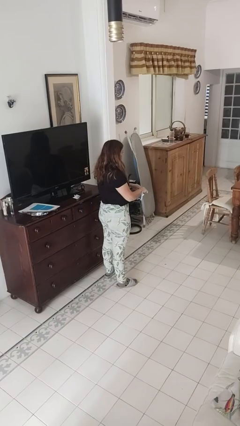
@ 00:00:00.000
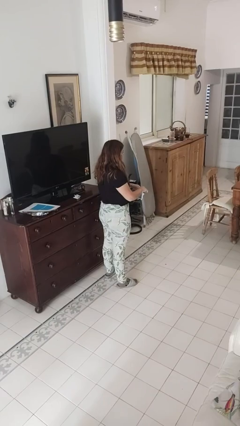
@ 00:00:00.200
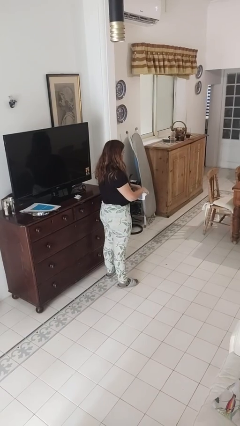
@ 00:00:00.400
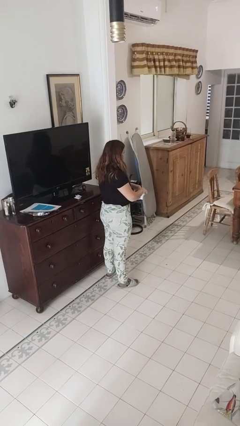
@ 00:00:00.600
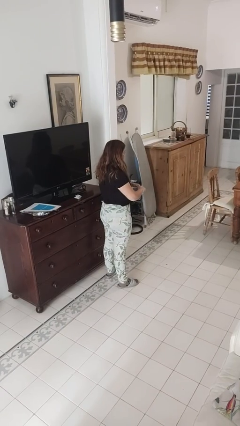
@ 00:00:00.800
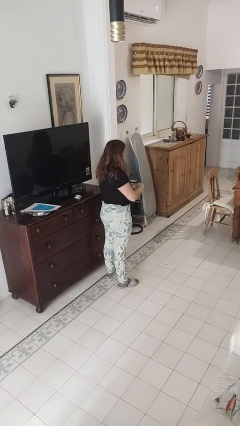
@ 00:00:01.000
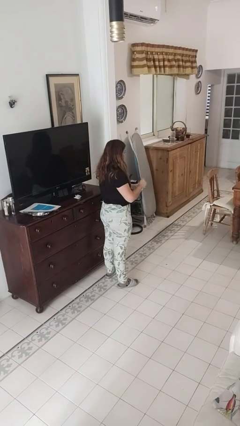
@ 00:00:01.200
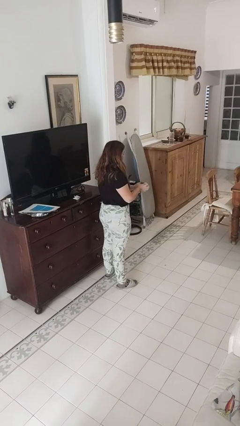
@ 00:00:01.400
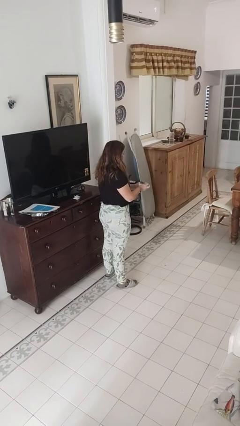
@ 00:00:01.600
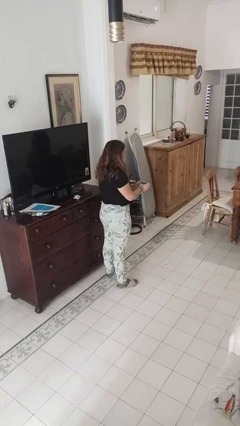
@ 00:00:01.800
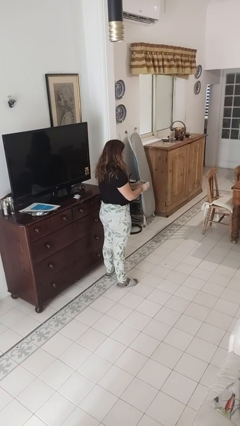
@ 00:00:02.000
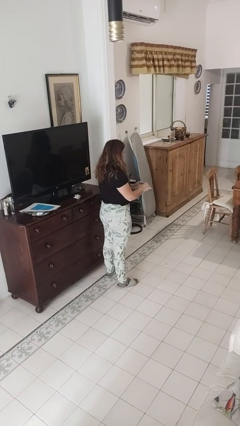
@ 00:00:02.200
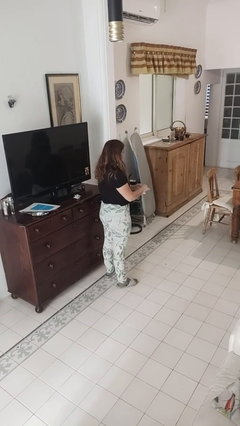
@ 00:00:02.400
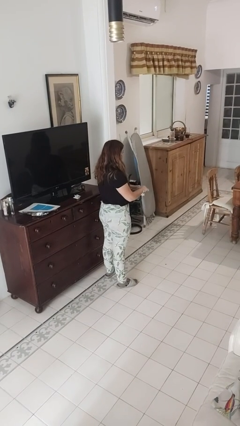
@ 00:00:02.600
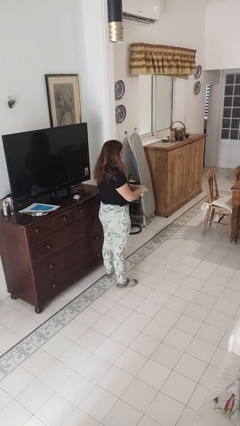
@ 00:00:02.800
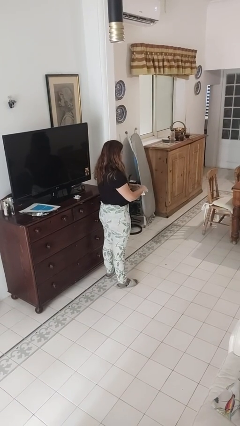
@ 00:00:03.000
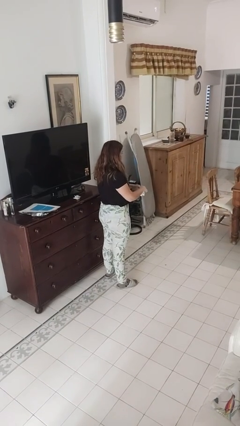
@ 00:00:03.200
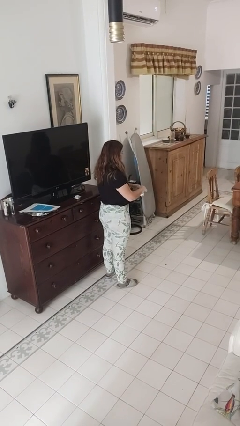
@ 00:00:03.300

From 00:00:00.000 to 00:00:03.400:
person tears paper

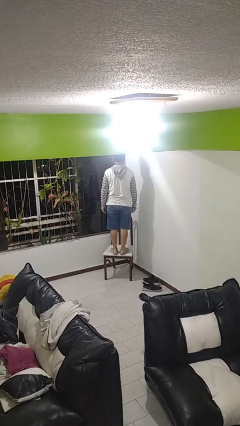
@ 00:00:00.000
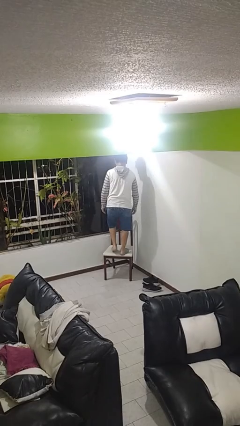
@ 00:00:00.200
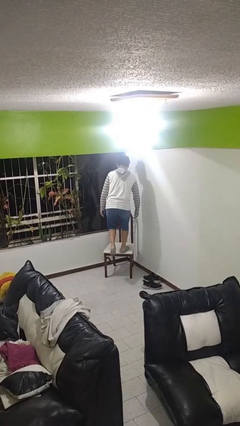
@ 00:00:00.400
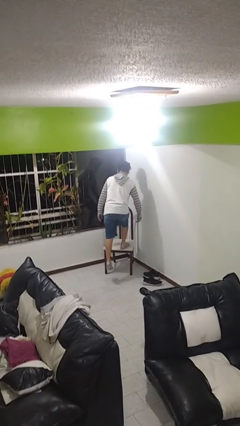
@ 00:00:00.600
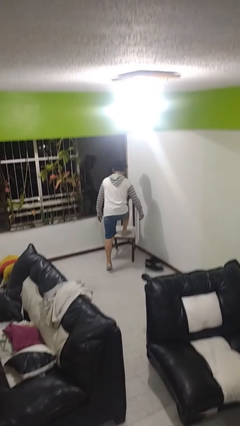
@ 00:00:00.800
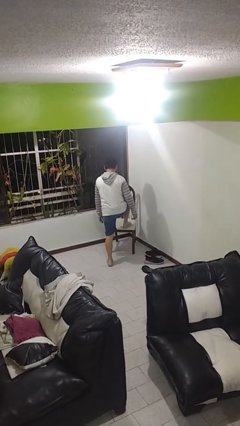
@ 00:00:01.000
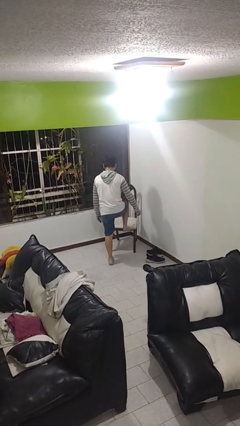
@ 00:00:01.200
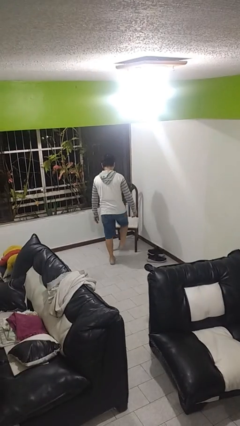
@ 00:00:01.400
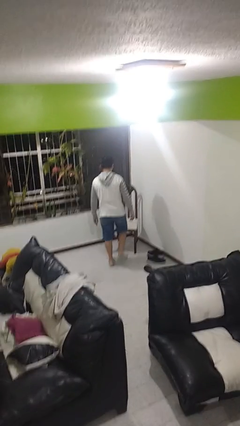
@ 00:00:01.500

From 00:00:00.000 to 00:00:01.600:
person climbs off chair

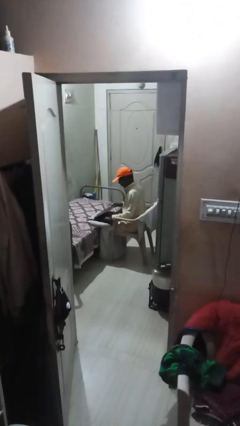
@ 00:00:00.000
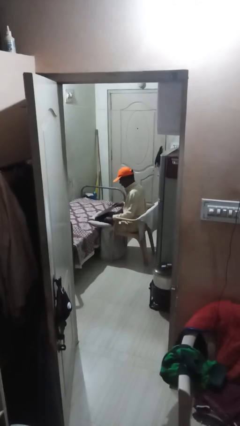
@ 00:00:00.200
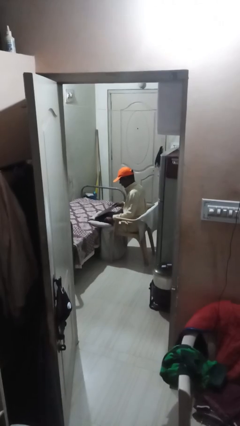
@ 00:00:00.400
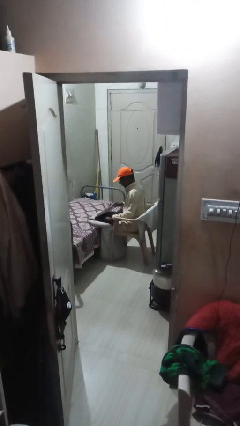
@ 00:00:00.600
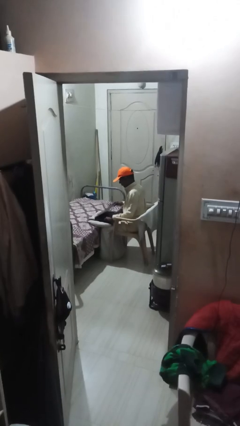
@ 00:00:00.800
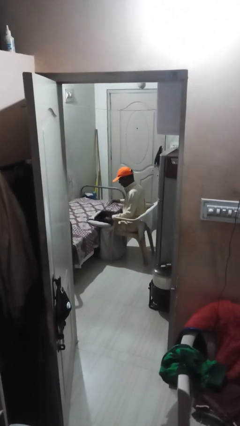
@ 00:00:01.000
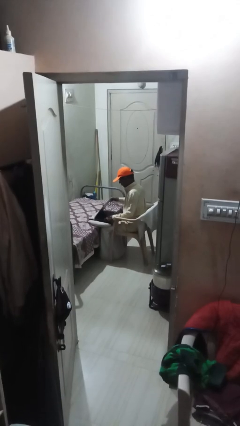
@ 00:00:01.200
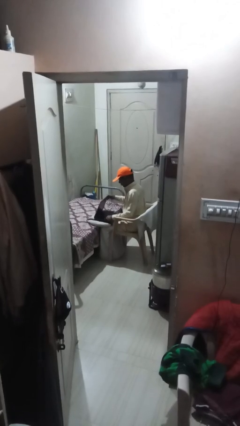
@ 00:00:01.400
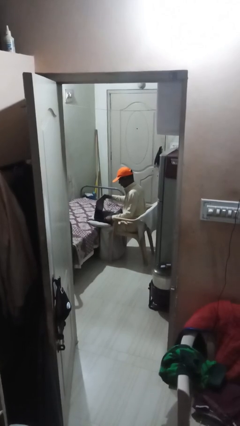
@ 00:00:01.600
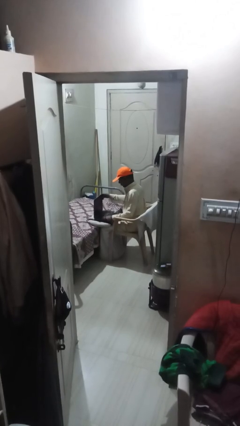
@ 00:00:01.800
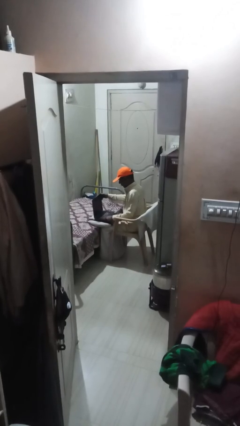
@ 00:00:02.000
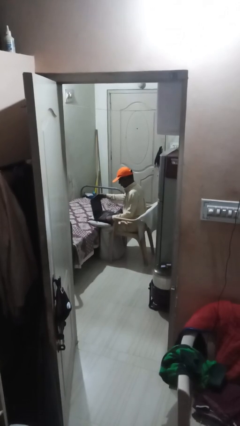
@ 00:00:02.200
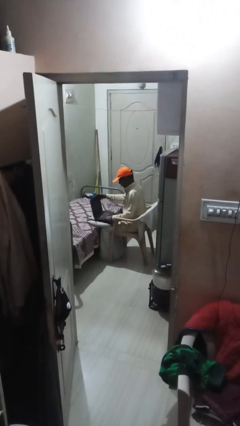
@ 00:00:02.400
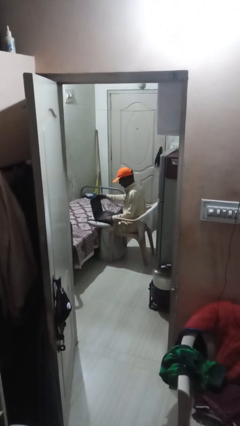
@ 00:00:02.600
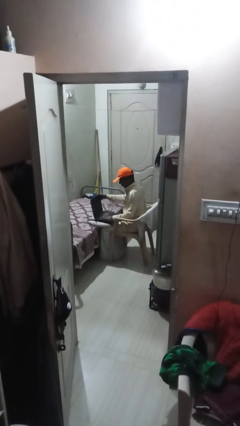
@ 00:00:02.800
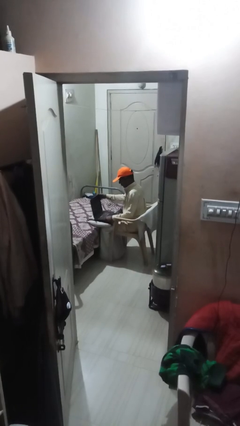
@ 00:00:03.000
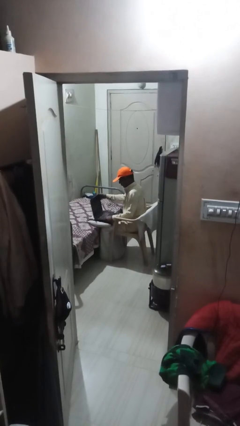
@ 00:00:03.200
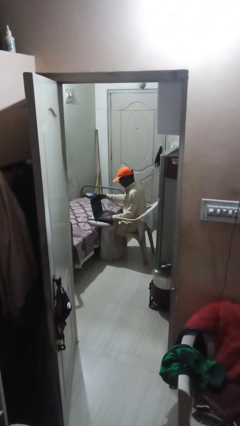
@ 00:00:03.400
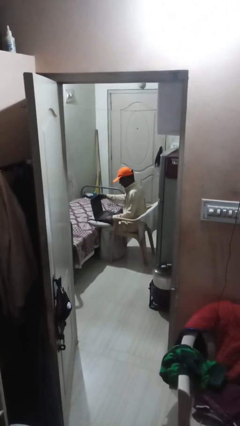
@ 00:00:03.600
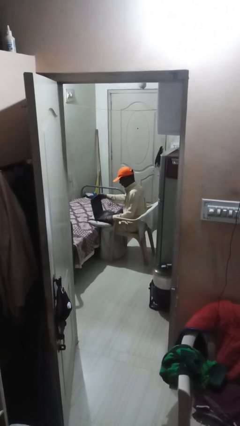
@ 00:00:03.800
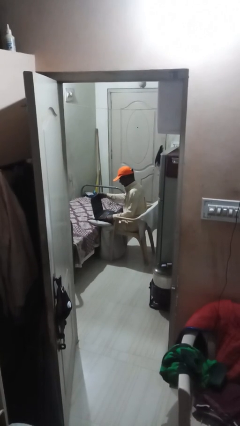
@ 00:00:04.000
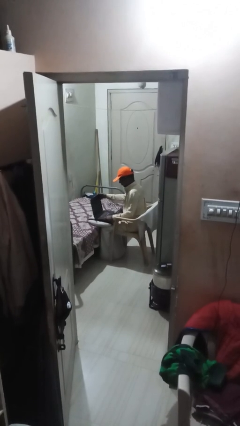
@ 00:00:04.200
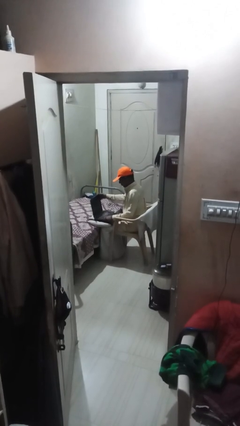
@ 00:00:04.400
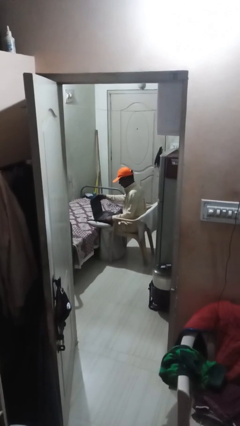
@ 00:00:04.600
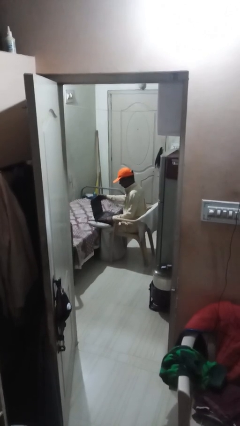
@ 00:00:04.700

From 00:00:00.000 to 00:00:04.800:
person interacts with laptop

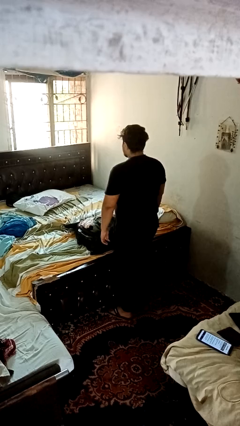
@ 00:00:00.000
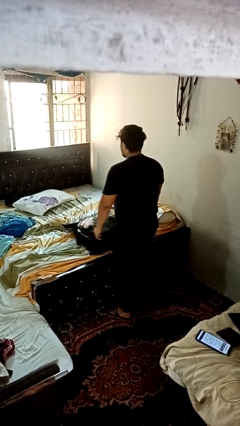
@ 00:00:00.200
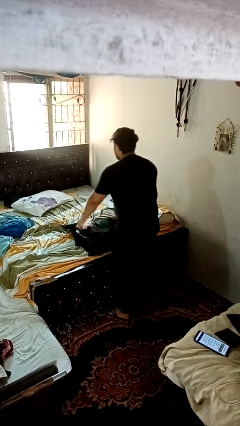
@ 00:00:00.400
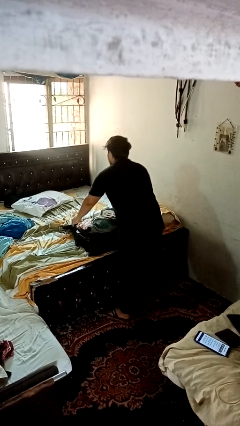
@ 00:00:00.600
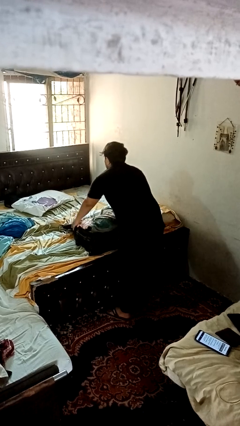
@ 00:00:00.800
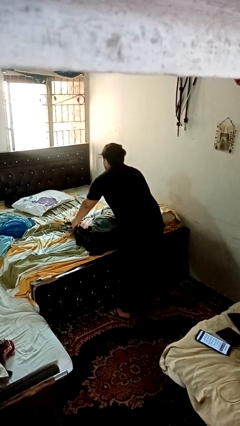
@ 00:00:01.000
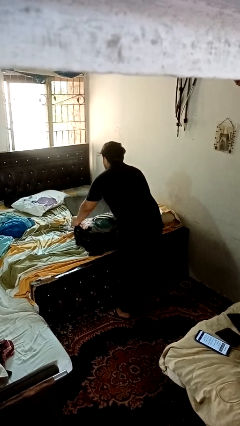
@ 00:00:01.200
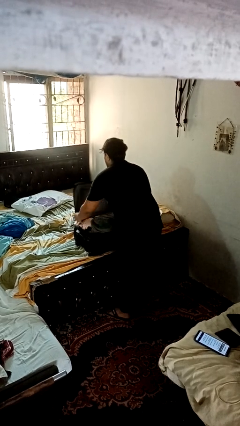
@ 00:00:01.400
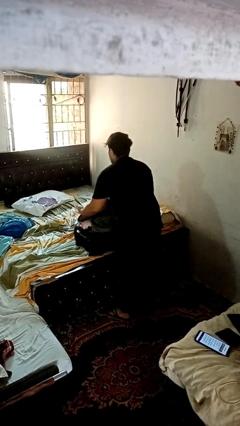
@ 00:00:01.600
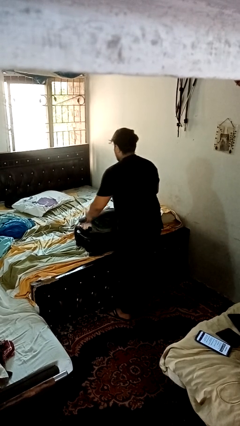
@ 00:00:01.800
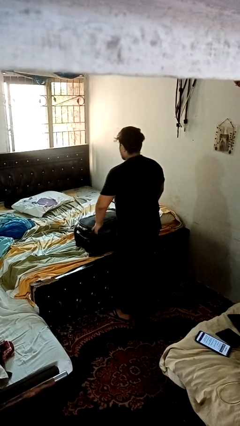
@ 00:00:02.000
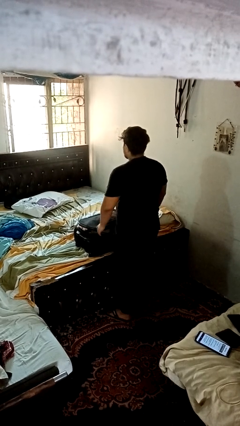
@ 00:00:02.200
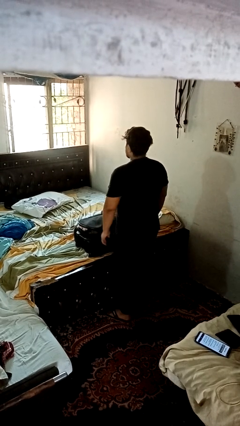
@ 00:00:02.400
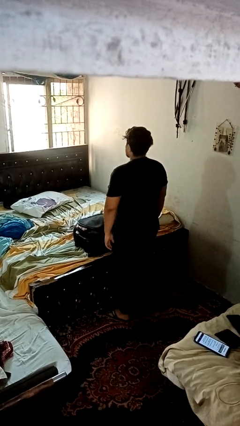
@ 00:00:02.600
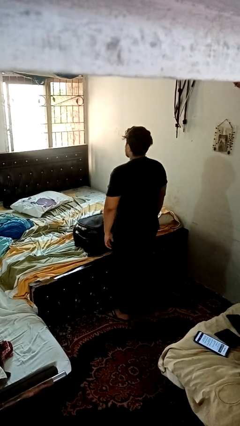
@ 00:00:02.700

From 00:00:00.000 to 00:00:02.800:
person closes suitcase

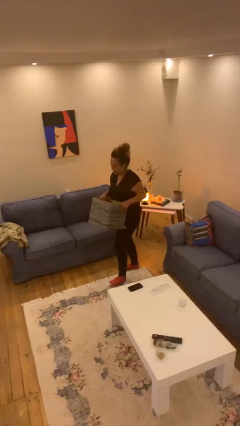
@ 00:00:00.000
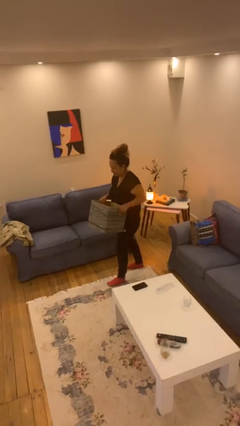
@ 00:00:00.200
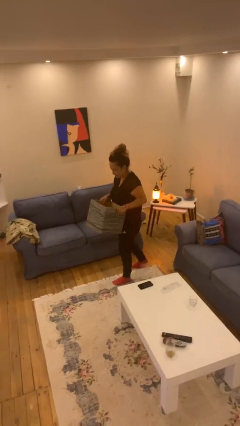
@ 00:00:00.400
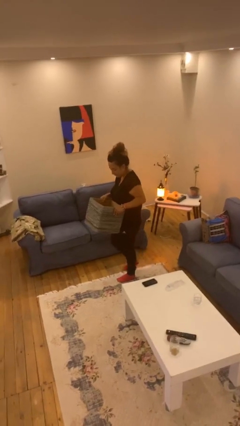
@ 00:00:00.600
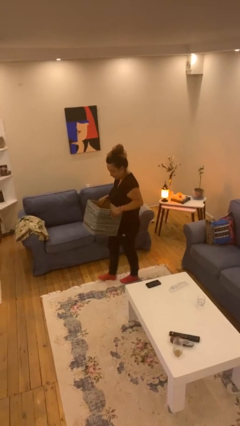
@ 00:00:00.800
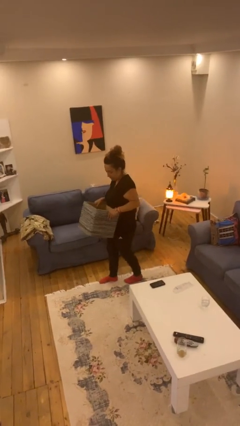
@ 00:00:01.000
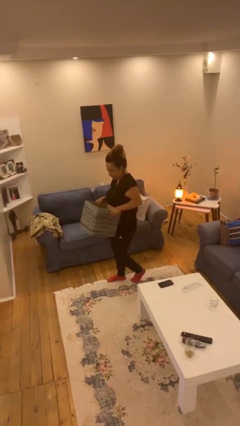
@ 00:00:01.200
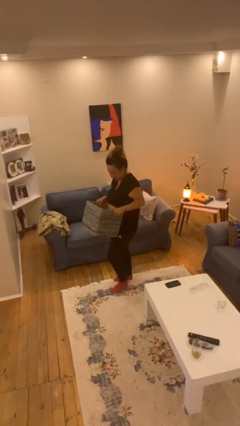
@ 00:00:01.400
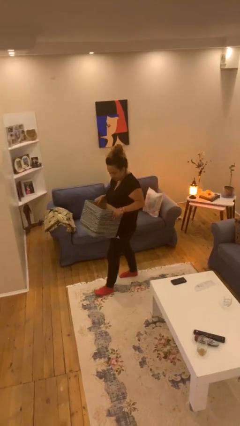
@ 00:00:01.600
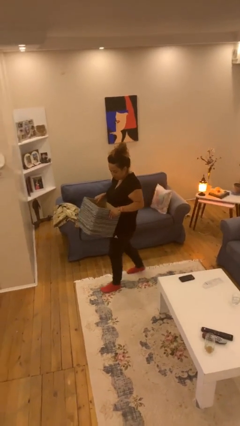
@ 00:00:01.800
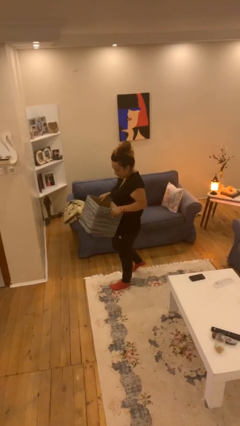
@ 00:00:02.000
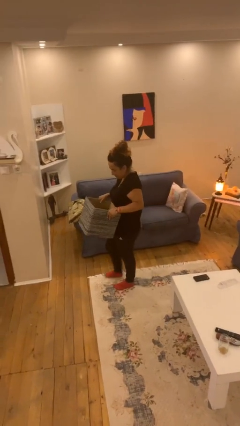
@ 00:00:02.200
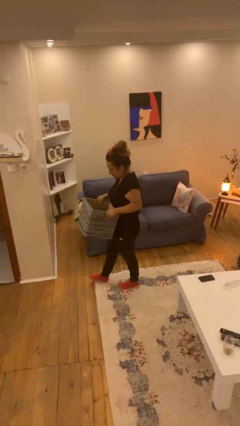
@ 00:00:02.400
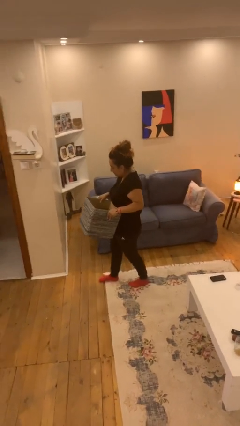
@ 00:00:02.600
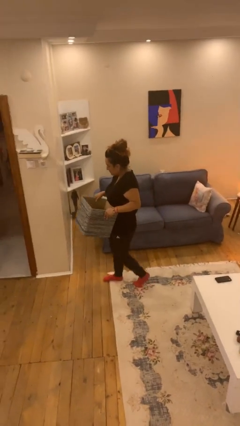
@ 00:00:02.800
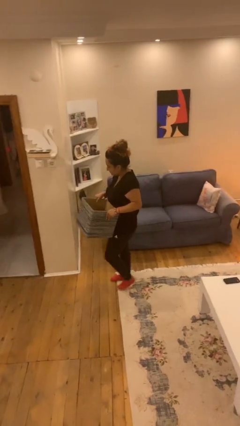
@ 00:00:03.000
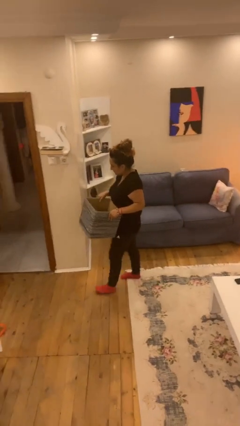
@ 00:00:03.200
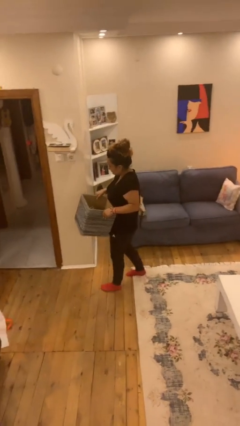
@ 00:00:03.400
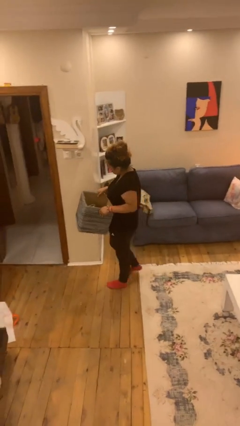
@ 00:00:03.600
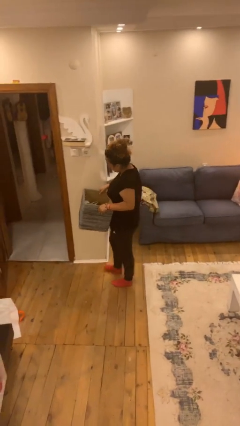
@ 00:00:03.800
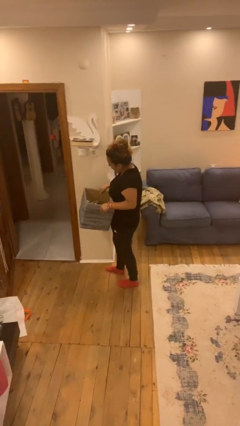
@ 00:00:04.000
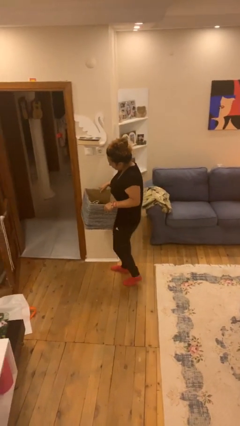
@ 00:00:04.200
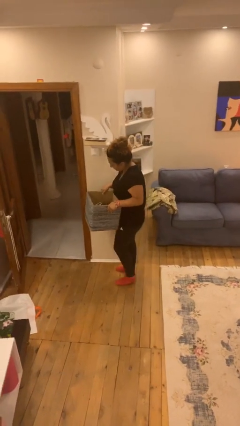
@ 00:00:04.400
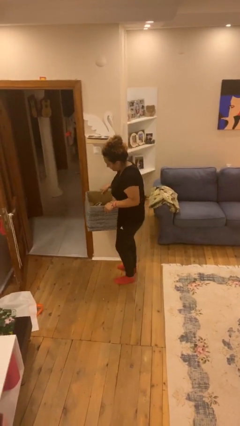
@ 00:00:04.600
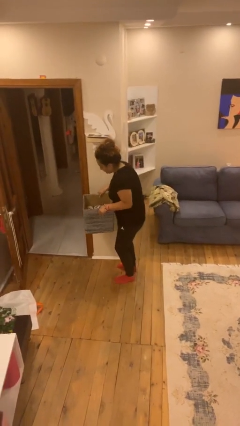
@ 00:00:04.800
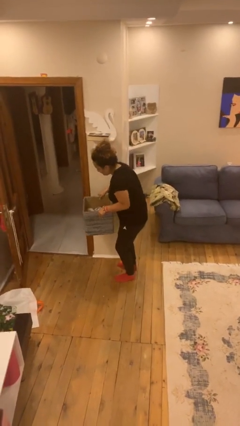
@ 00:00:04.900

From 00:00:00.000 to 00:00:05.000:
person carries heavy object

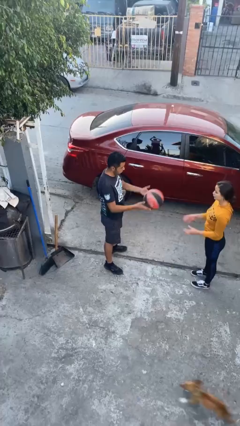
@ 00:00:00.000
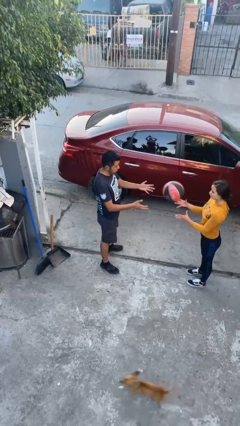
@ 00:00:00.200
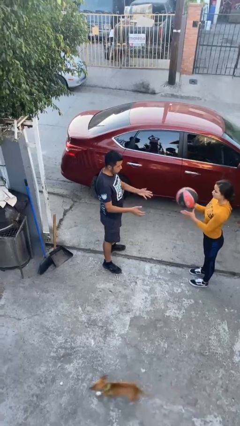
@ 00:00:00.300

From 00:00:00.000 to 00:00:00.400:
person throws object to person
